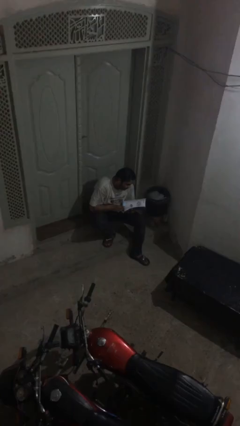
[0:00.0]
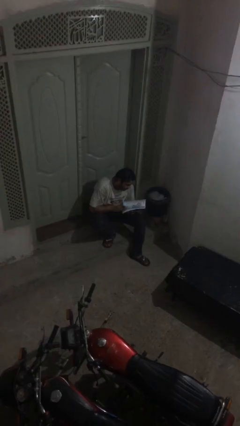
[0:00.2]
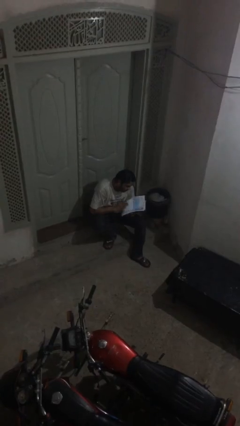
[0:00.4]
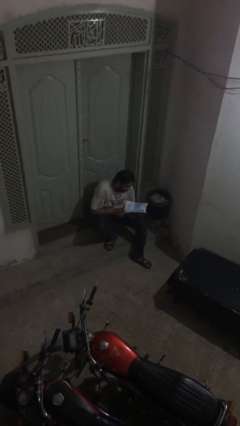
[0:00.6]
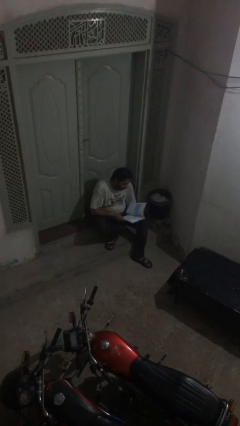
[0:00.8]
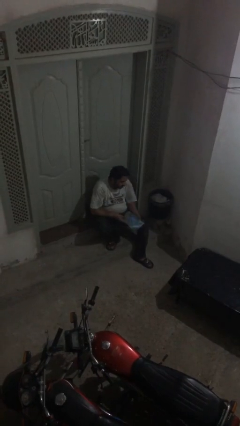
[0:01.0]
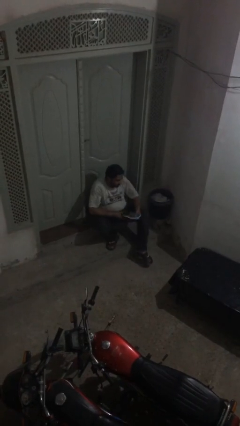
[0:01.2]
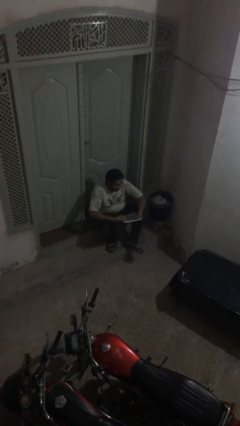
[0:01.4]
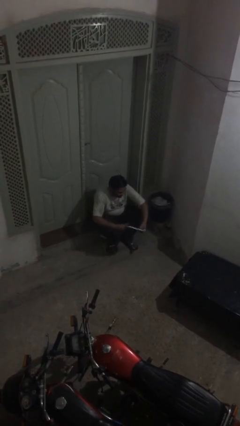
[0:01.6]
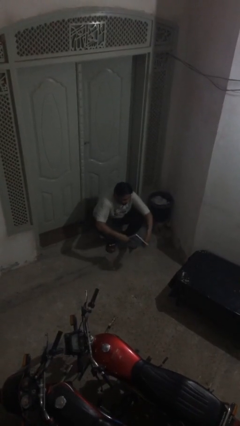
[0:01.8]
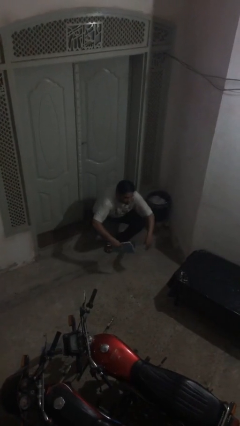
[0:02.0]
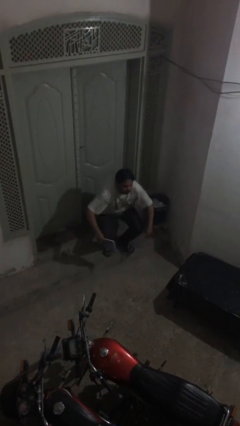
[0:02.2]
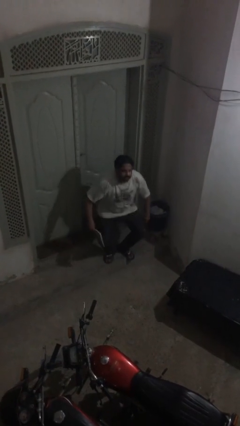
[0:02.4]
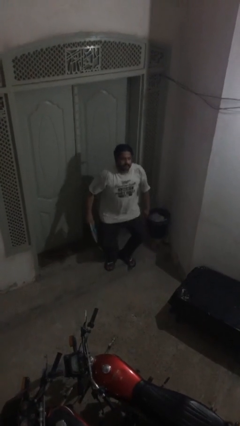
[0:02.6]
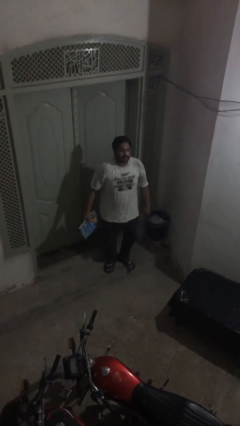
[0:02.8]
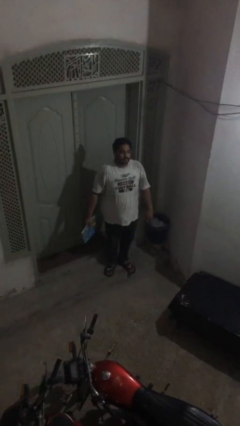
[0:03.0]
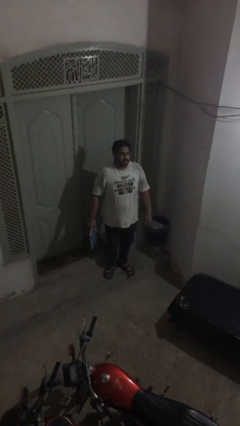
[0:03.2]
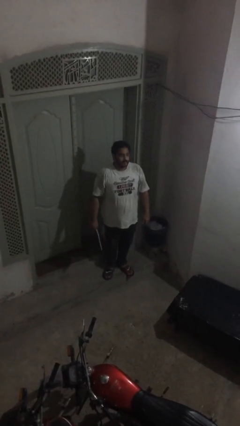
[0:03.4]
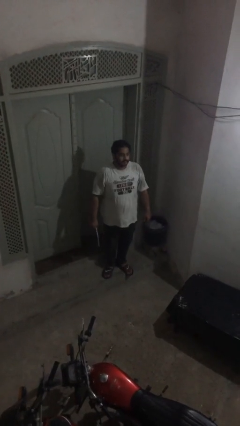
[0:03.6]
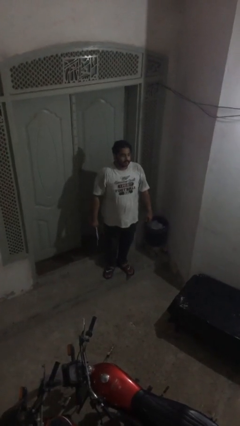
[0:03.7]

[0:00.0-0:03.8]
person stands up

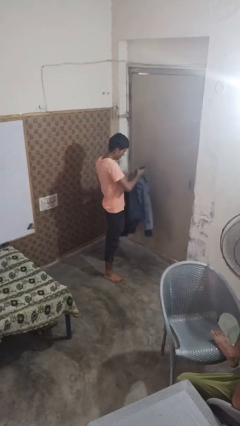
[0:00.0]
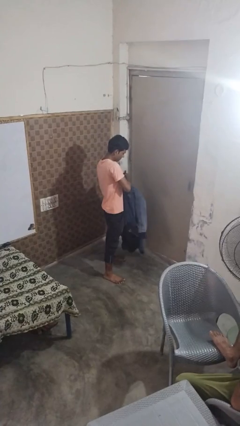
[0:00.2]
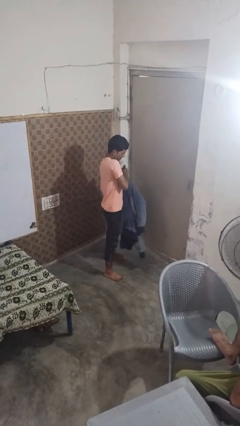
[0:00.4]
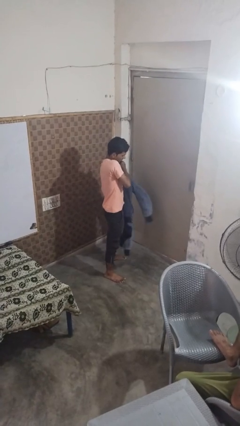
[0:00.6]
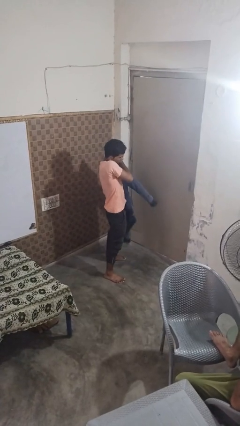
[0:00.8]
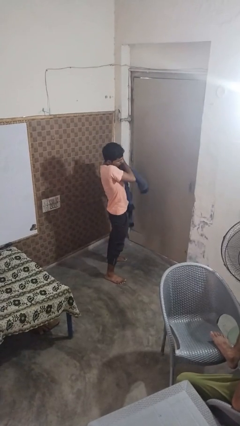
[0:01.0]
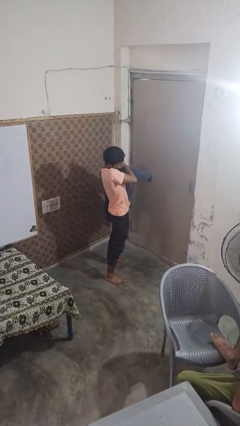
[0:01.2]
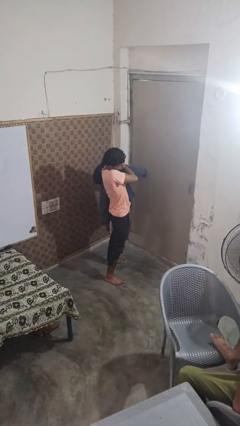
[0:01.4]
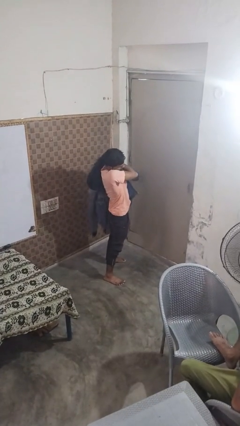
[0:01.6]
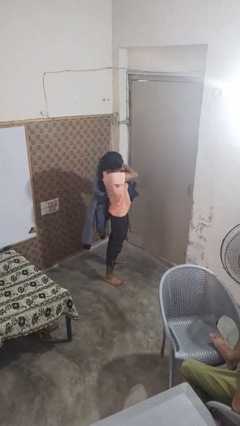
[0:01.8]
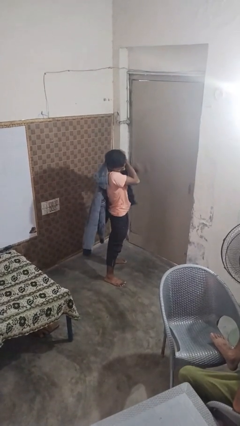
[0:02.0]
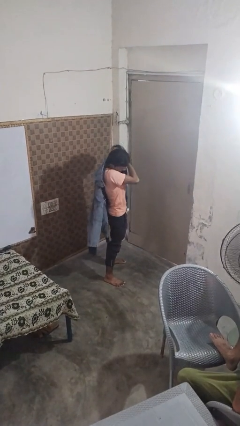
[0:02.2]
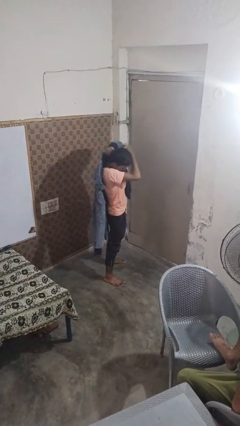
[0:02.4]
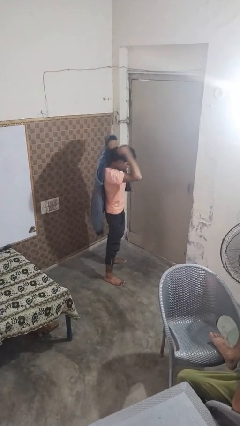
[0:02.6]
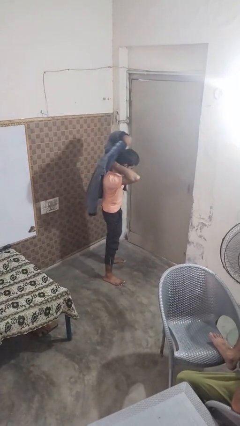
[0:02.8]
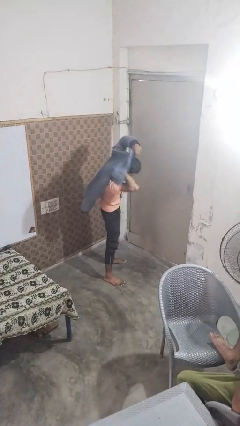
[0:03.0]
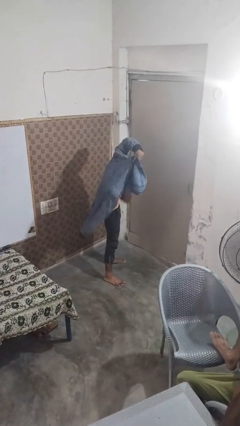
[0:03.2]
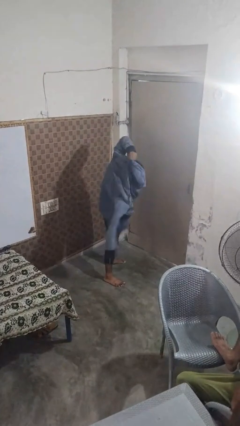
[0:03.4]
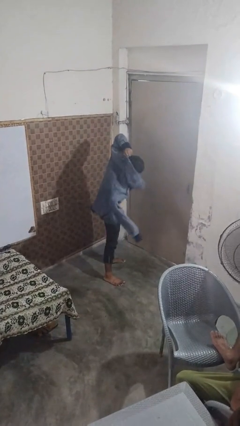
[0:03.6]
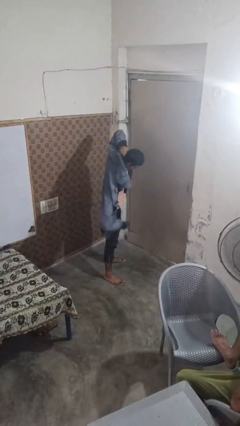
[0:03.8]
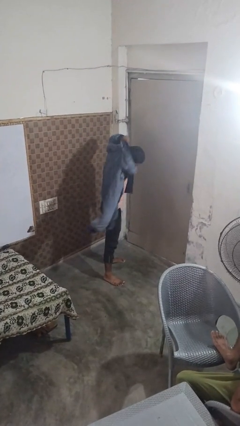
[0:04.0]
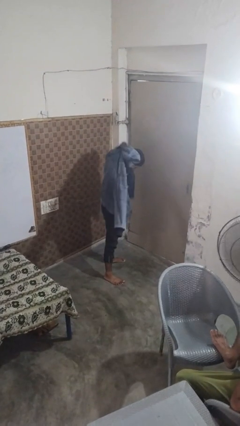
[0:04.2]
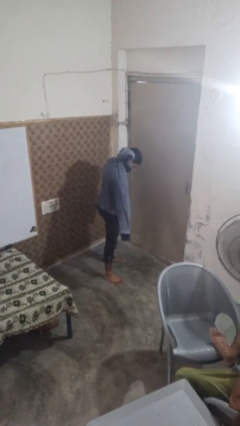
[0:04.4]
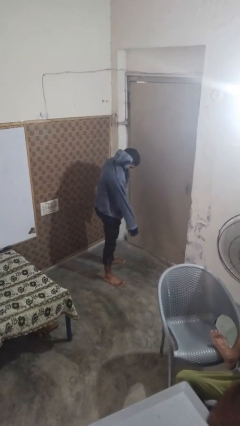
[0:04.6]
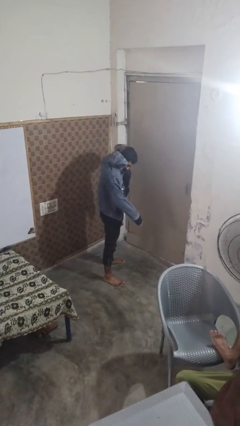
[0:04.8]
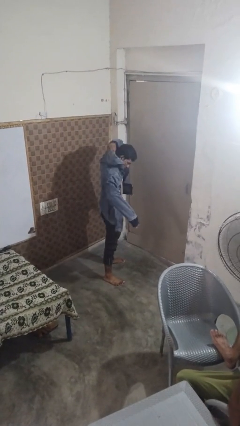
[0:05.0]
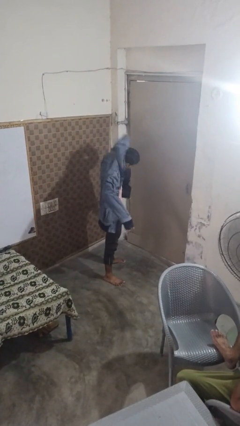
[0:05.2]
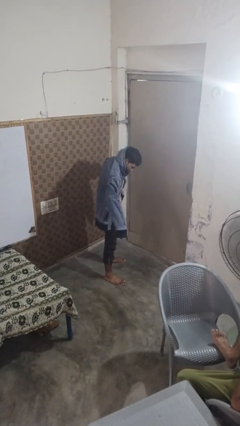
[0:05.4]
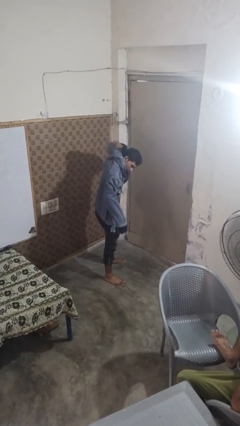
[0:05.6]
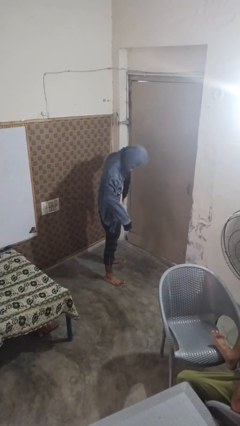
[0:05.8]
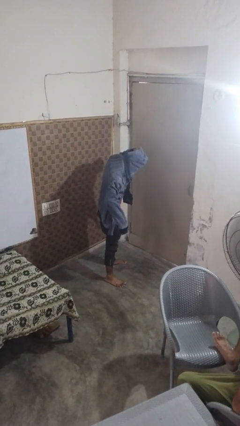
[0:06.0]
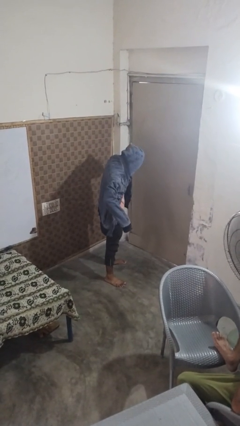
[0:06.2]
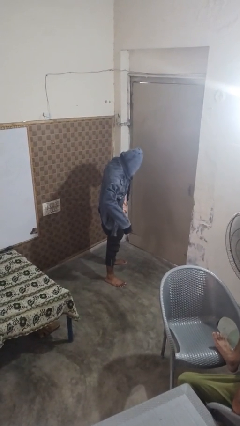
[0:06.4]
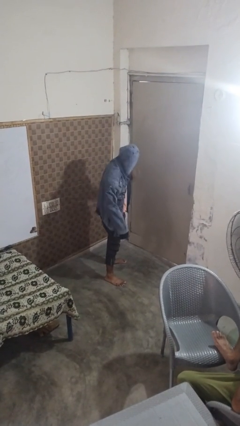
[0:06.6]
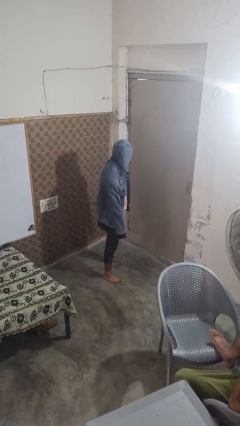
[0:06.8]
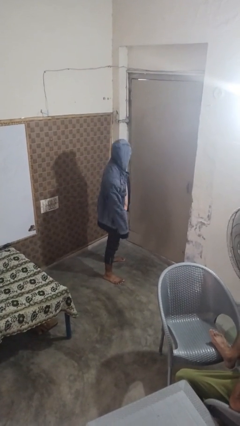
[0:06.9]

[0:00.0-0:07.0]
person puts on hoodie

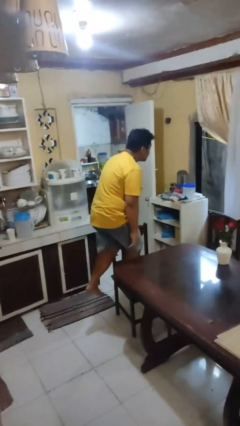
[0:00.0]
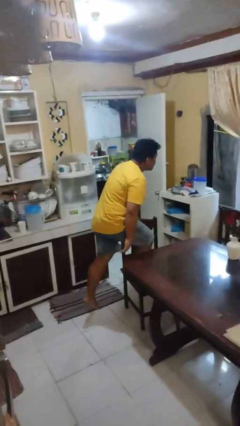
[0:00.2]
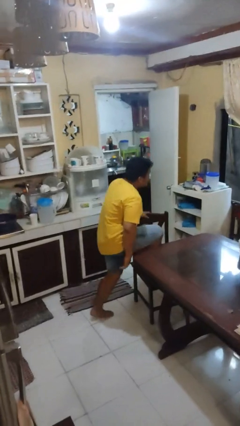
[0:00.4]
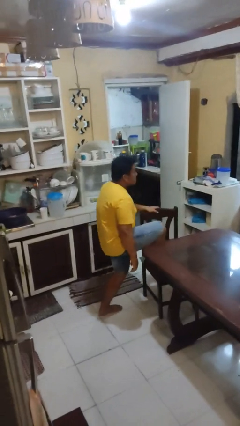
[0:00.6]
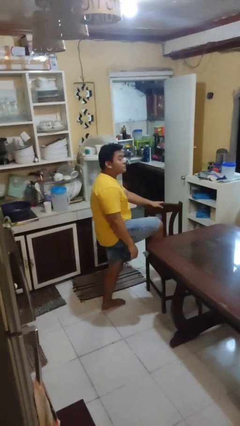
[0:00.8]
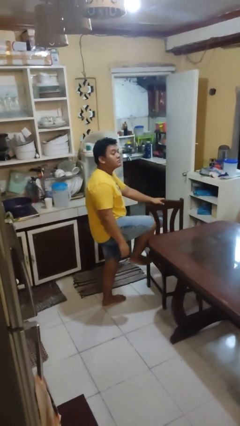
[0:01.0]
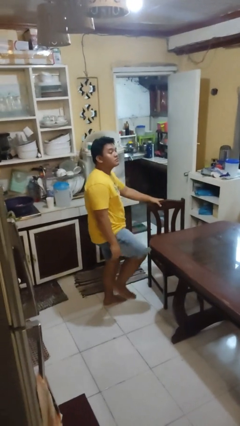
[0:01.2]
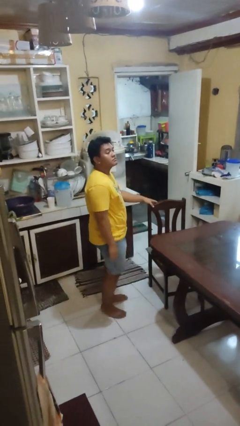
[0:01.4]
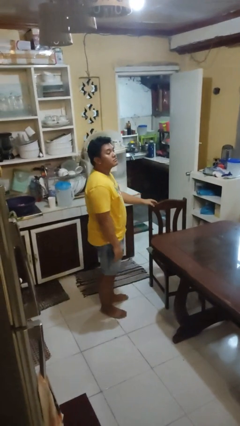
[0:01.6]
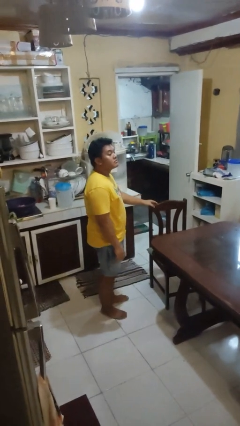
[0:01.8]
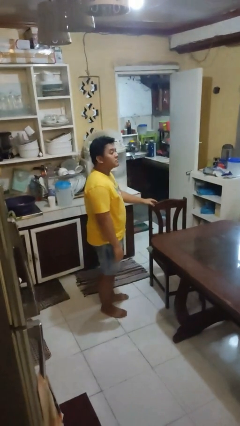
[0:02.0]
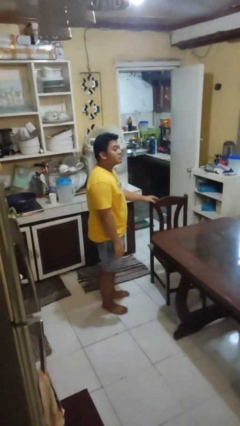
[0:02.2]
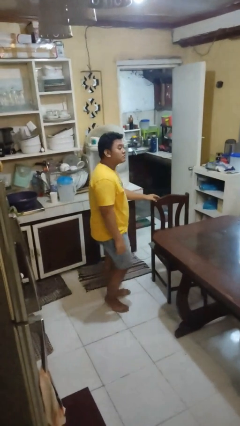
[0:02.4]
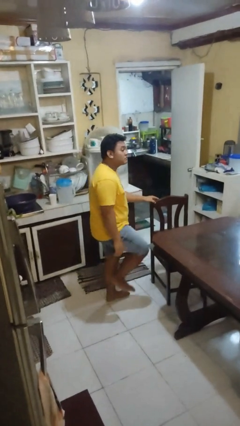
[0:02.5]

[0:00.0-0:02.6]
person climbs off chair

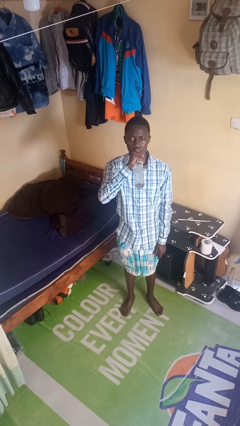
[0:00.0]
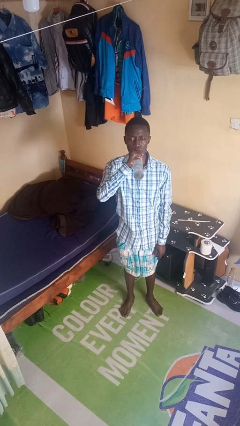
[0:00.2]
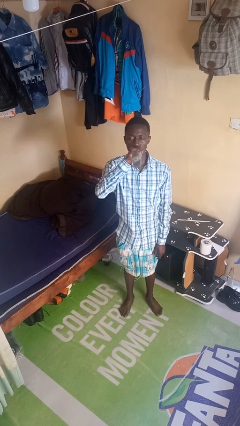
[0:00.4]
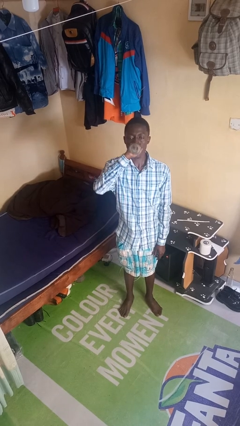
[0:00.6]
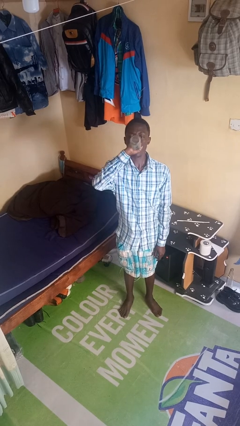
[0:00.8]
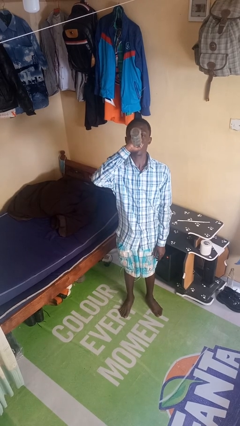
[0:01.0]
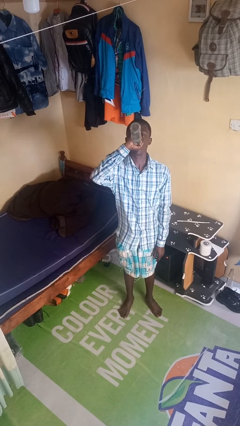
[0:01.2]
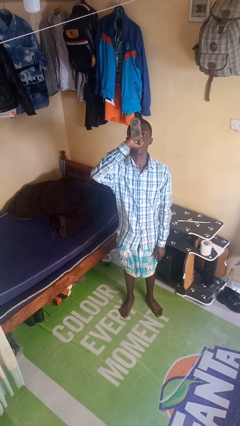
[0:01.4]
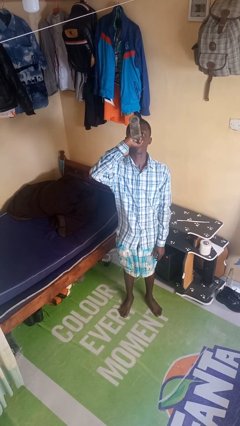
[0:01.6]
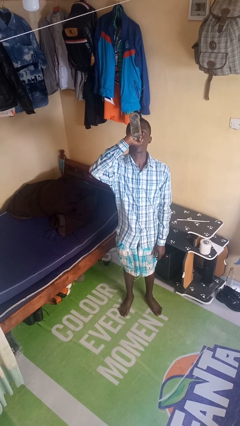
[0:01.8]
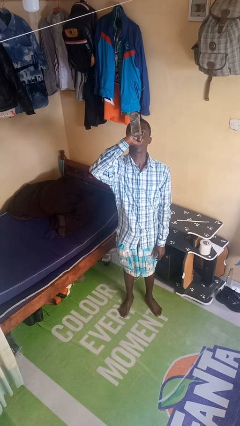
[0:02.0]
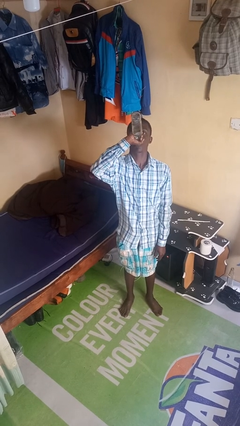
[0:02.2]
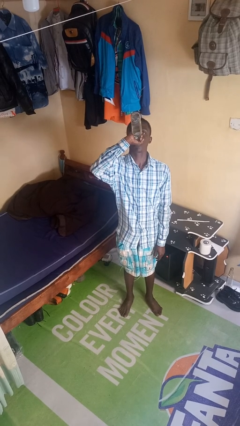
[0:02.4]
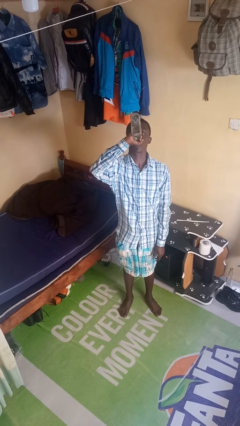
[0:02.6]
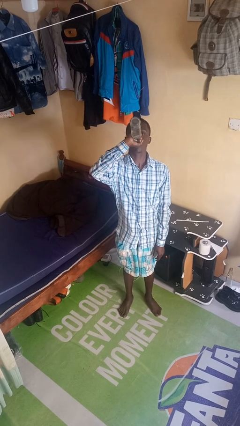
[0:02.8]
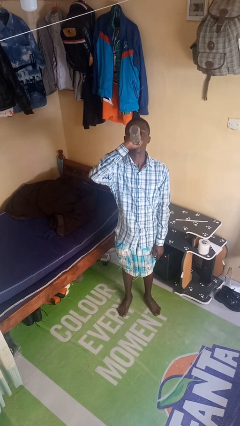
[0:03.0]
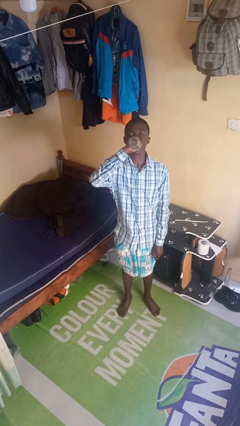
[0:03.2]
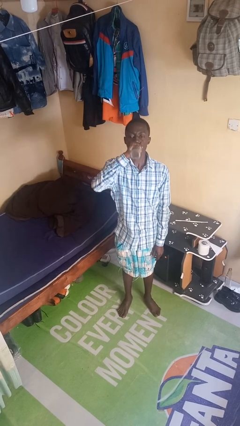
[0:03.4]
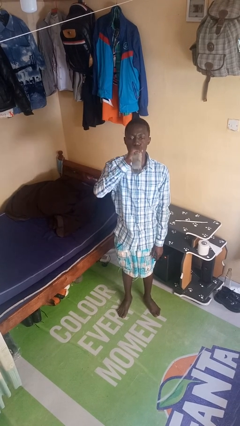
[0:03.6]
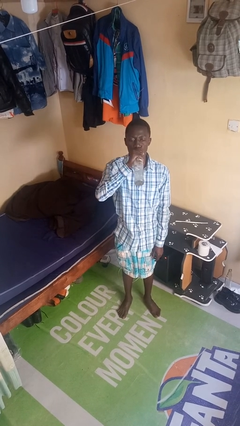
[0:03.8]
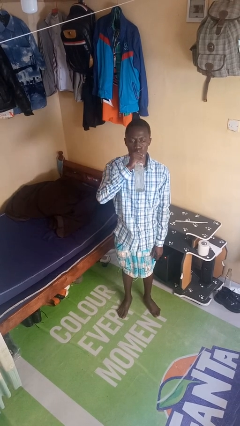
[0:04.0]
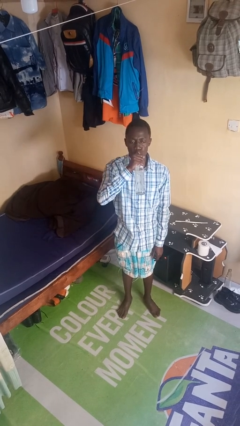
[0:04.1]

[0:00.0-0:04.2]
person drinks from bottle

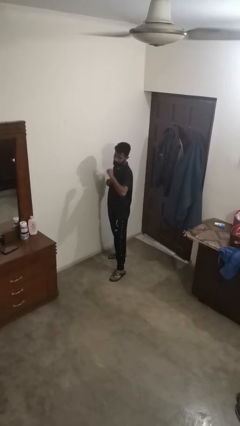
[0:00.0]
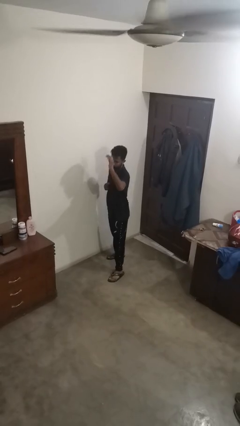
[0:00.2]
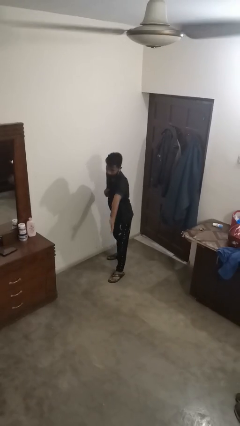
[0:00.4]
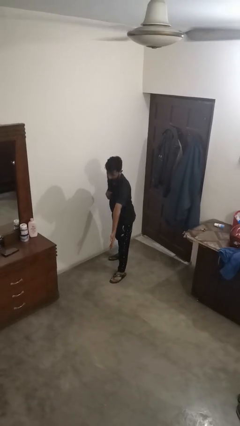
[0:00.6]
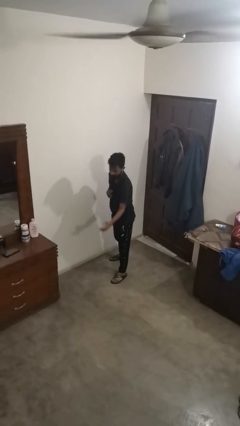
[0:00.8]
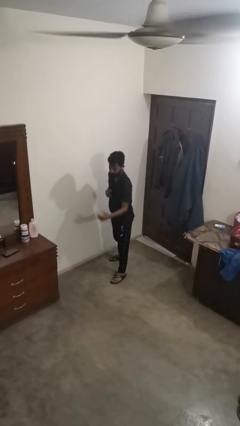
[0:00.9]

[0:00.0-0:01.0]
person karate chop
